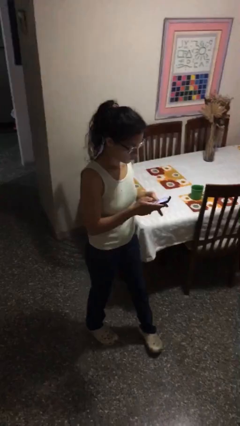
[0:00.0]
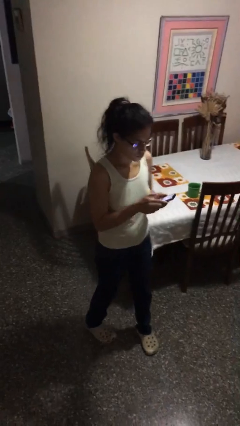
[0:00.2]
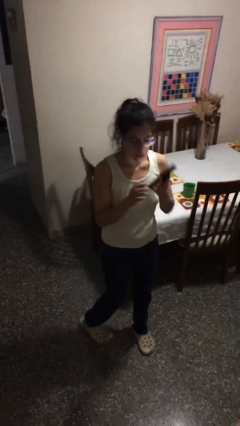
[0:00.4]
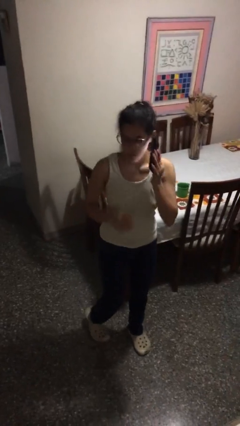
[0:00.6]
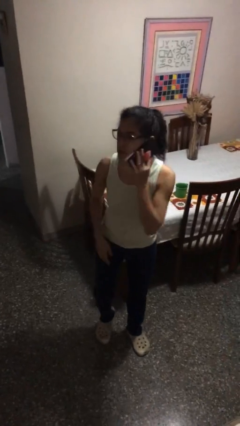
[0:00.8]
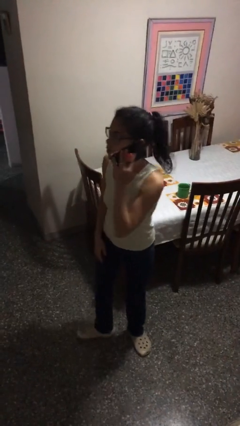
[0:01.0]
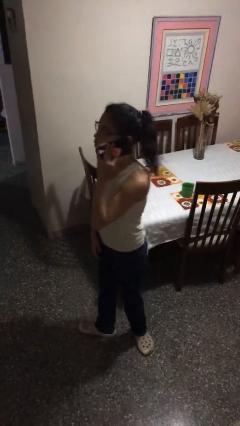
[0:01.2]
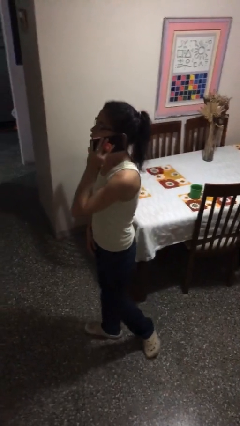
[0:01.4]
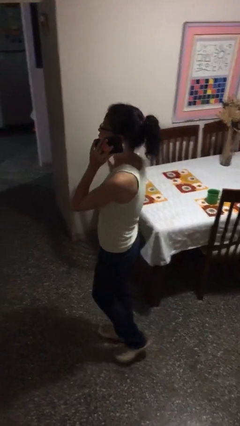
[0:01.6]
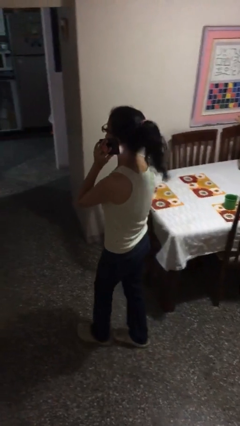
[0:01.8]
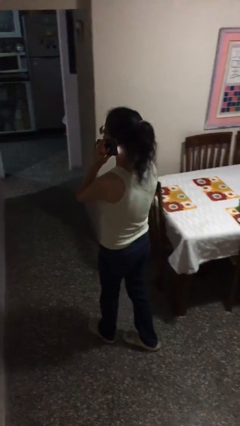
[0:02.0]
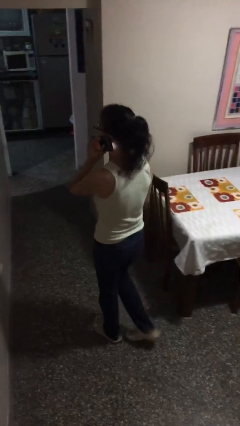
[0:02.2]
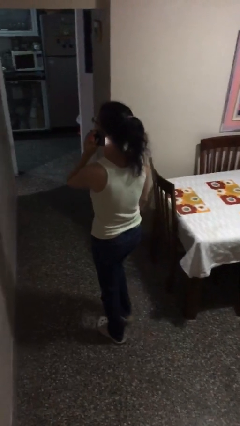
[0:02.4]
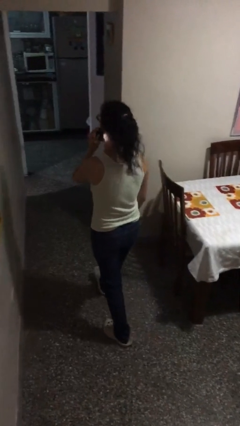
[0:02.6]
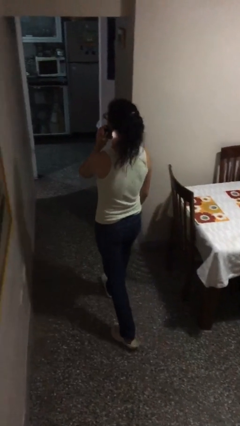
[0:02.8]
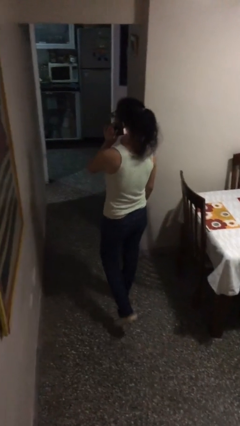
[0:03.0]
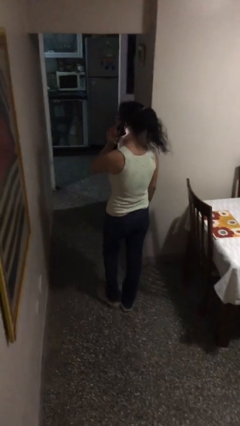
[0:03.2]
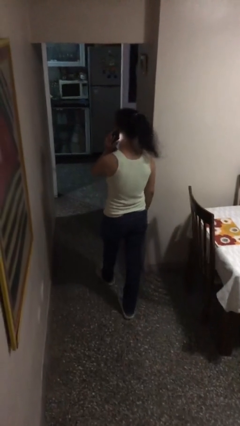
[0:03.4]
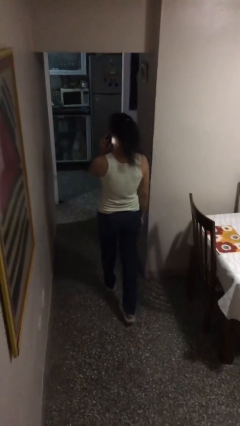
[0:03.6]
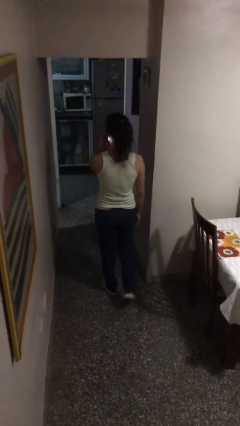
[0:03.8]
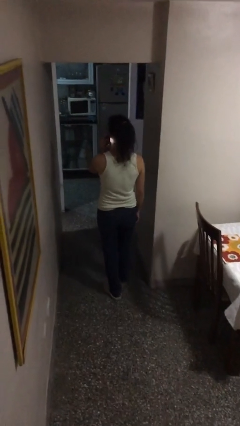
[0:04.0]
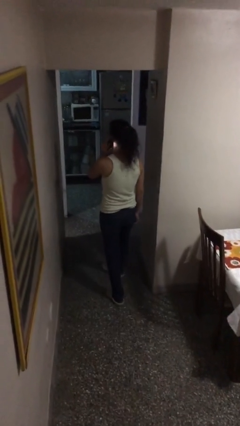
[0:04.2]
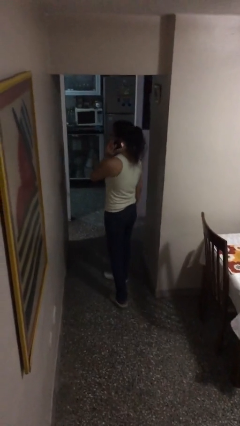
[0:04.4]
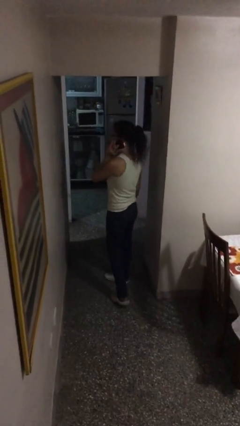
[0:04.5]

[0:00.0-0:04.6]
person talks on phone

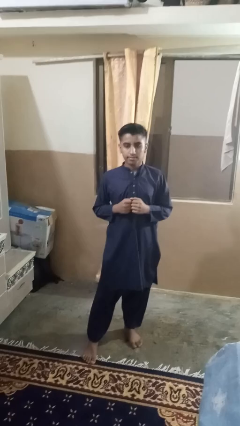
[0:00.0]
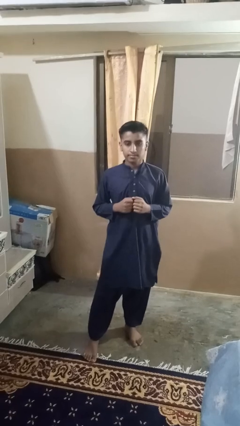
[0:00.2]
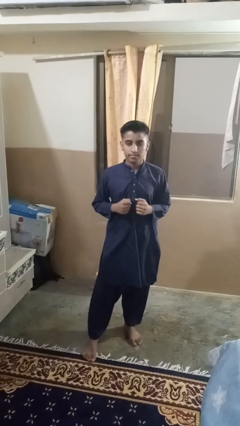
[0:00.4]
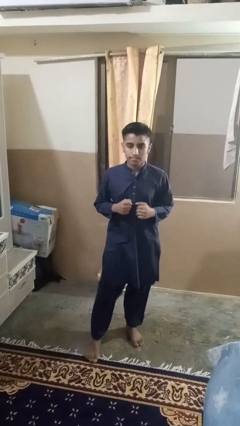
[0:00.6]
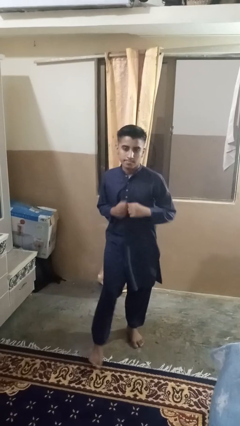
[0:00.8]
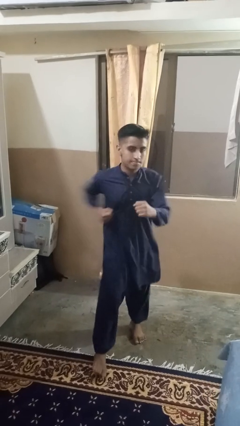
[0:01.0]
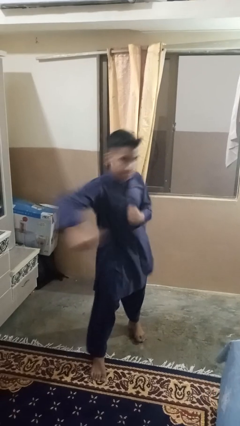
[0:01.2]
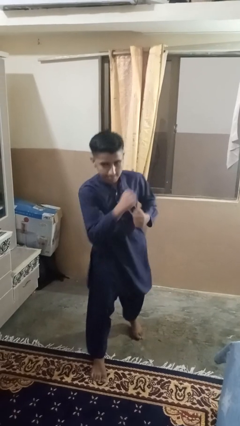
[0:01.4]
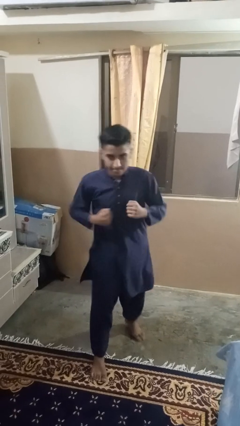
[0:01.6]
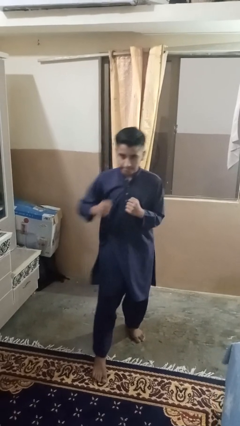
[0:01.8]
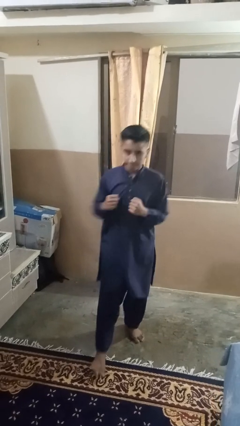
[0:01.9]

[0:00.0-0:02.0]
person karate chop

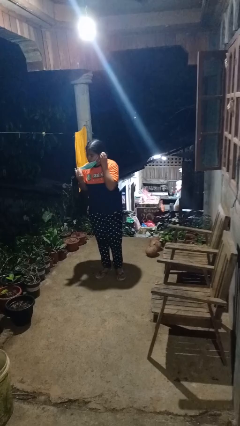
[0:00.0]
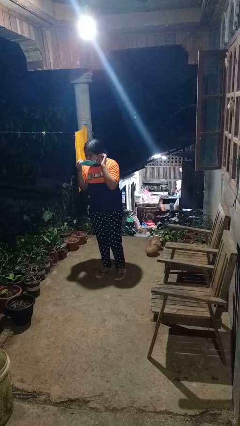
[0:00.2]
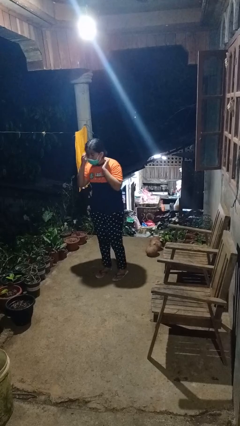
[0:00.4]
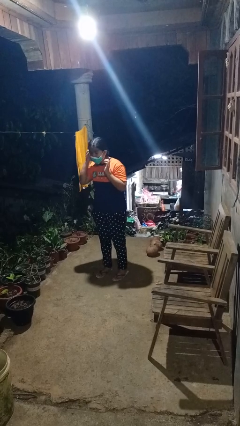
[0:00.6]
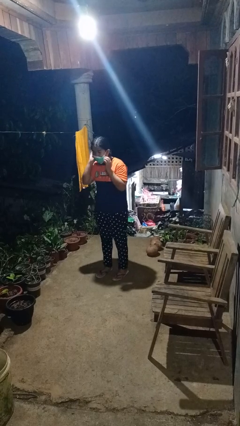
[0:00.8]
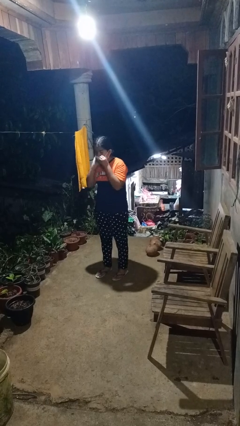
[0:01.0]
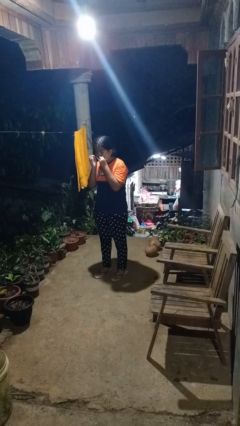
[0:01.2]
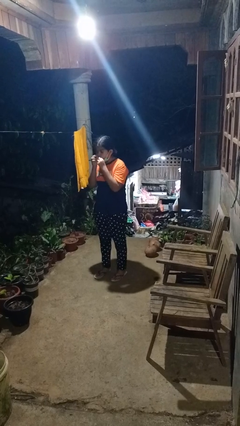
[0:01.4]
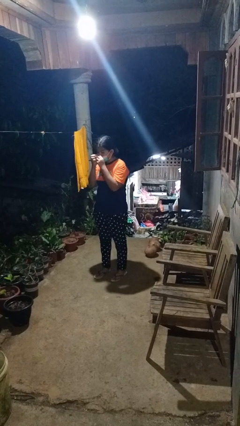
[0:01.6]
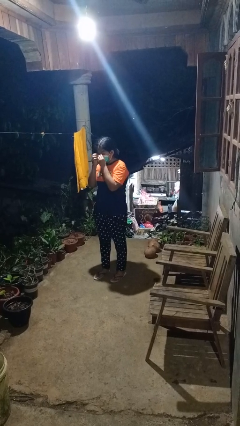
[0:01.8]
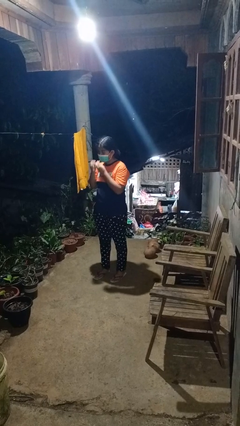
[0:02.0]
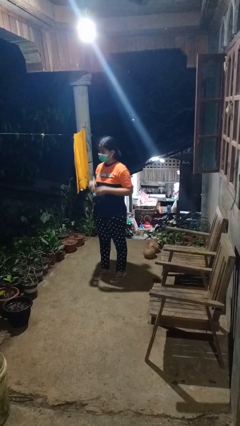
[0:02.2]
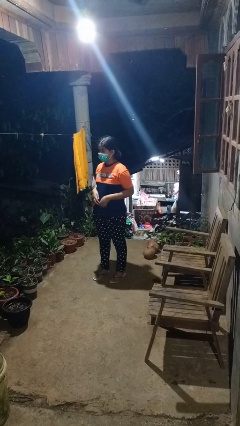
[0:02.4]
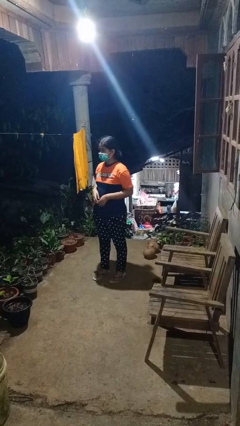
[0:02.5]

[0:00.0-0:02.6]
person puts on facemask

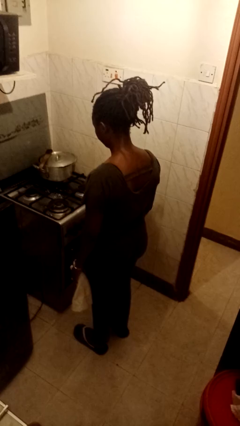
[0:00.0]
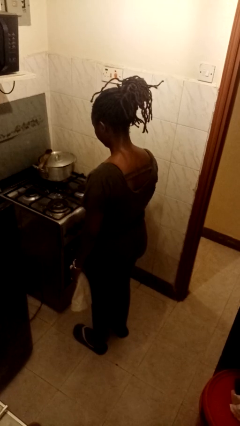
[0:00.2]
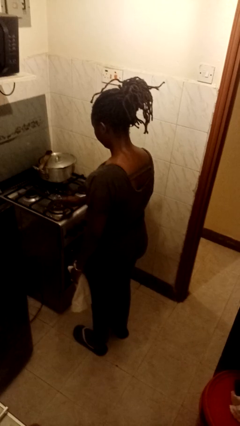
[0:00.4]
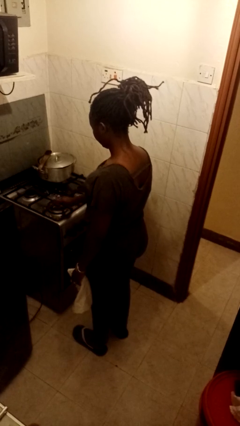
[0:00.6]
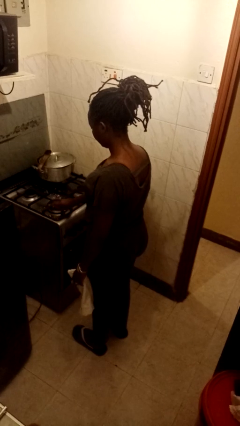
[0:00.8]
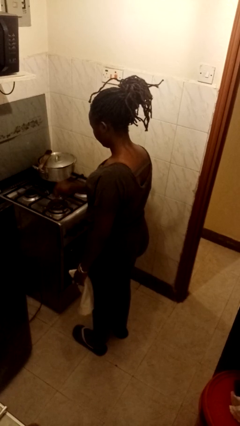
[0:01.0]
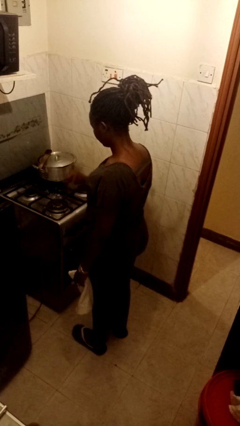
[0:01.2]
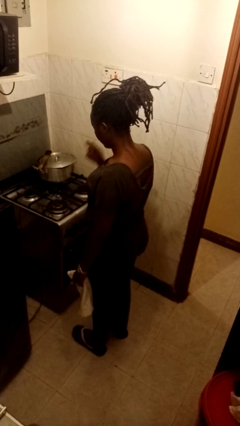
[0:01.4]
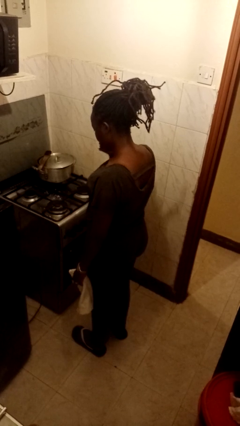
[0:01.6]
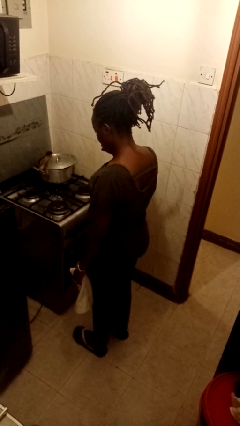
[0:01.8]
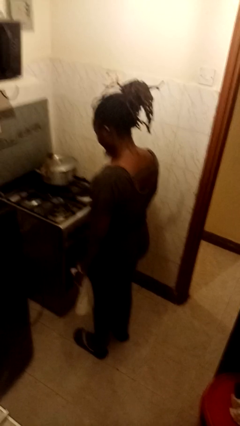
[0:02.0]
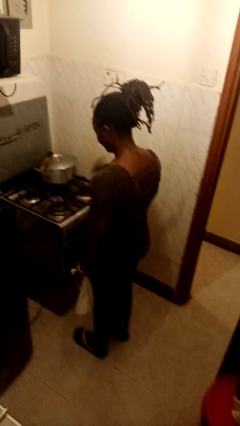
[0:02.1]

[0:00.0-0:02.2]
person burns hand

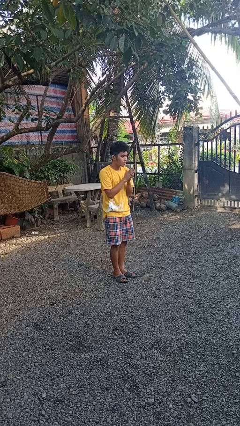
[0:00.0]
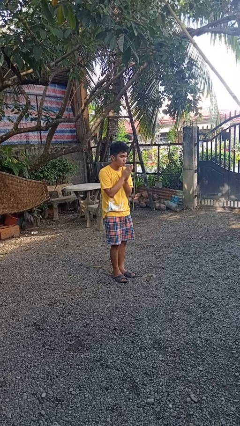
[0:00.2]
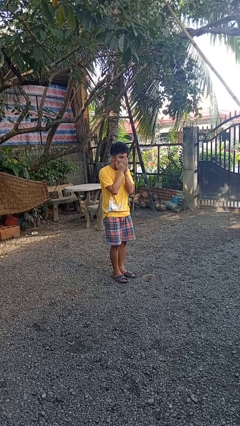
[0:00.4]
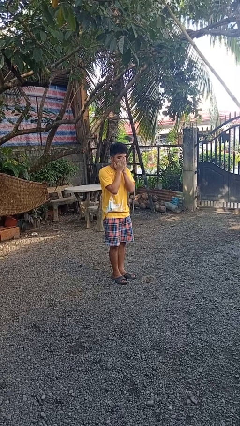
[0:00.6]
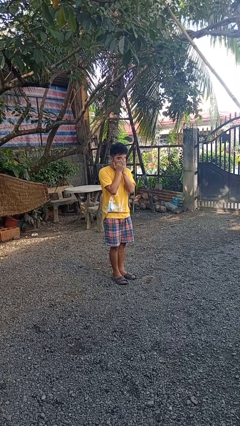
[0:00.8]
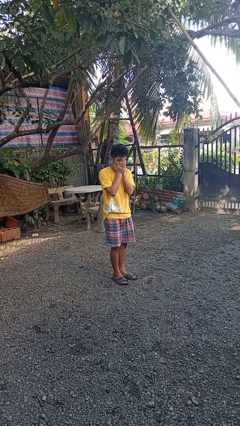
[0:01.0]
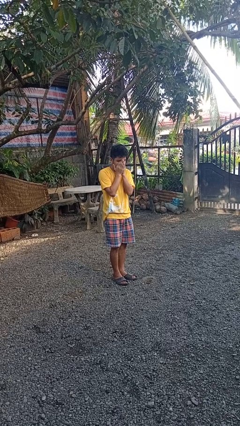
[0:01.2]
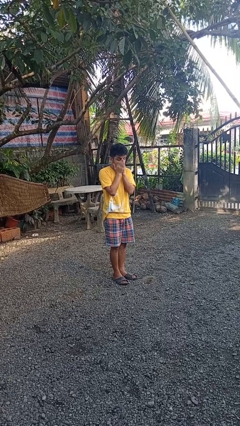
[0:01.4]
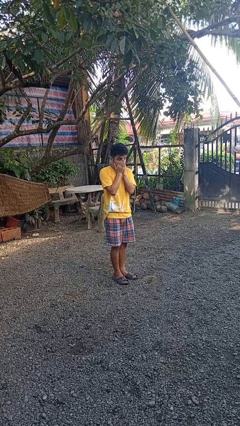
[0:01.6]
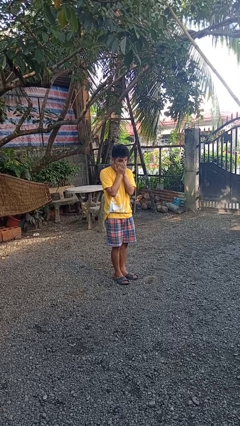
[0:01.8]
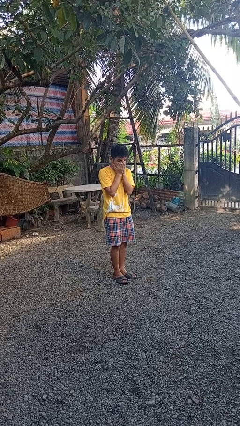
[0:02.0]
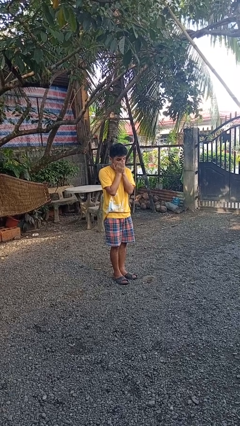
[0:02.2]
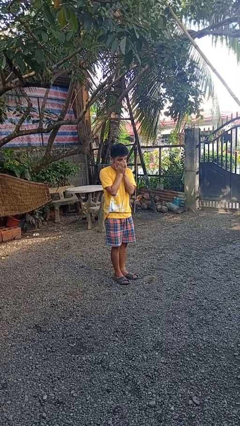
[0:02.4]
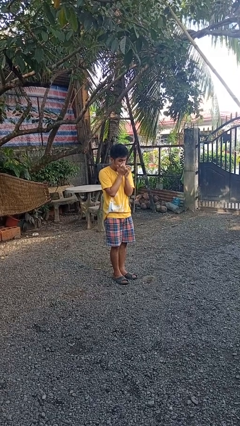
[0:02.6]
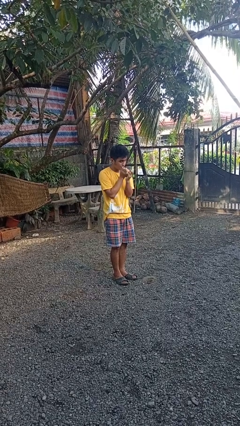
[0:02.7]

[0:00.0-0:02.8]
person blows into hands

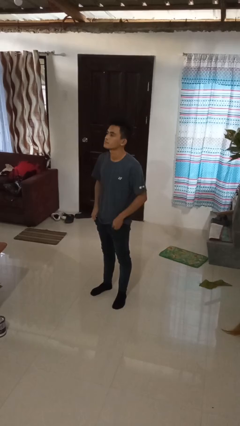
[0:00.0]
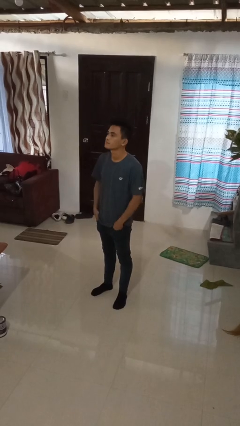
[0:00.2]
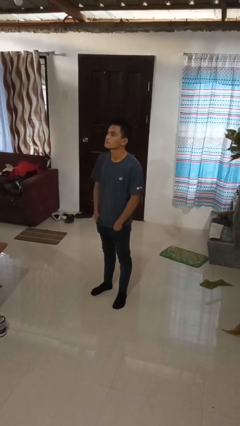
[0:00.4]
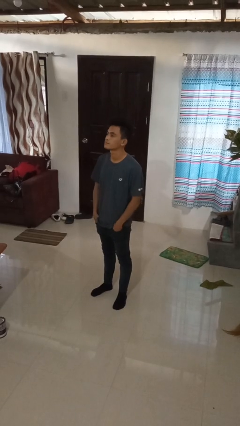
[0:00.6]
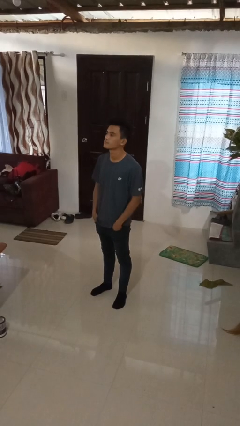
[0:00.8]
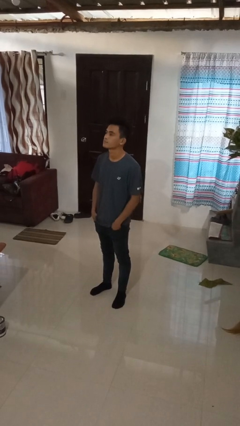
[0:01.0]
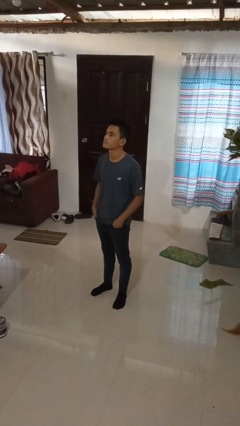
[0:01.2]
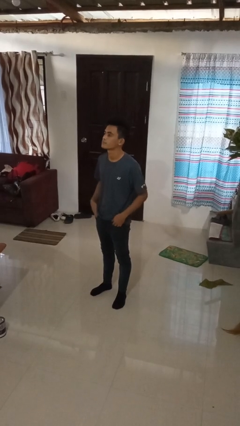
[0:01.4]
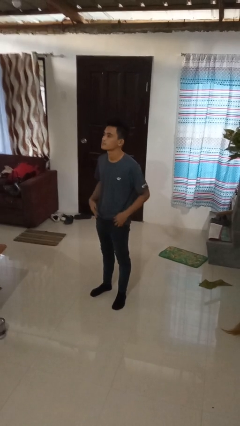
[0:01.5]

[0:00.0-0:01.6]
person puts hands in back pockets

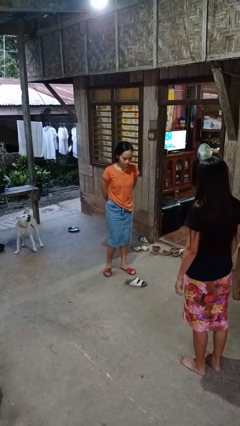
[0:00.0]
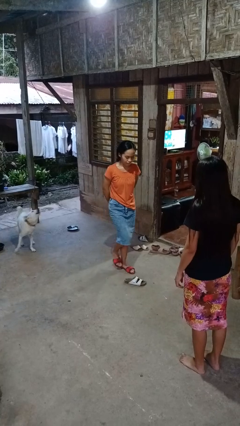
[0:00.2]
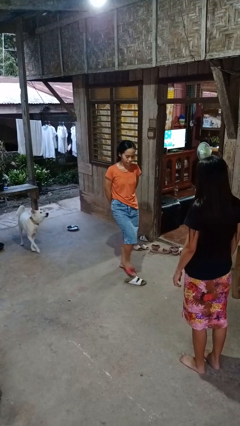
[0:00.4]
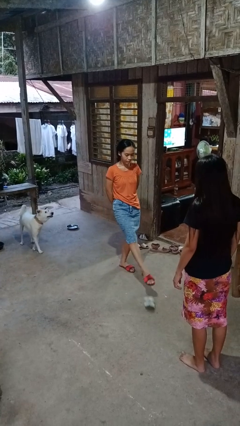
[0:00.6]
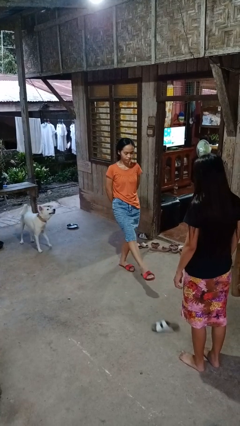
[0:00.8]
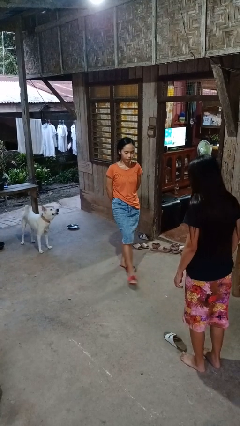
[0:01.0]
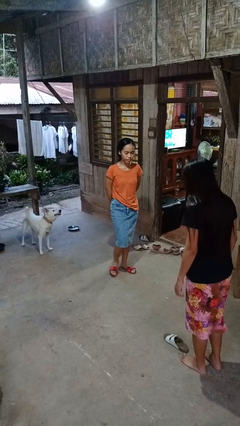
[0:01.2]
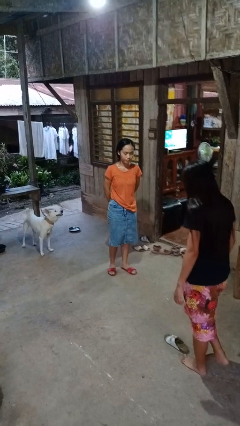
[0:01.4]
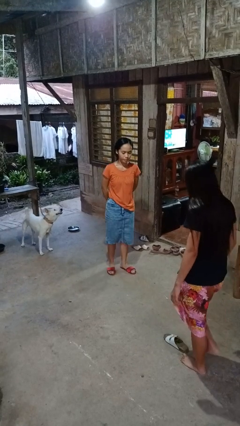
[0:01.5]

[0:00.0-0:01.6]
person kicks object to person
